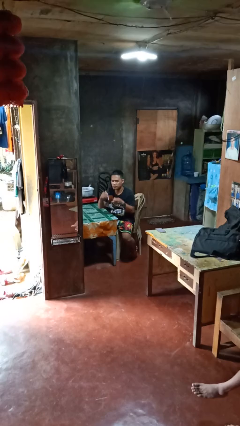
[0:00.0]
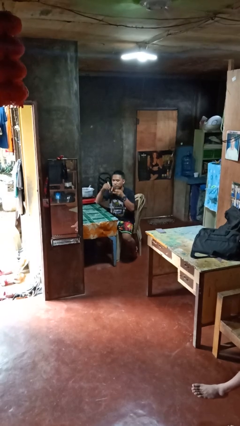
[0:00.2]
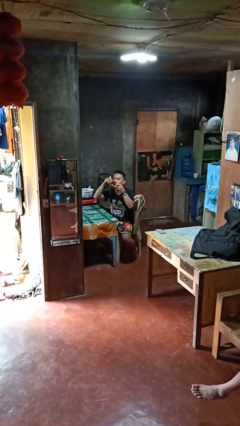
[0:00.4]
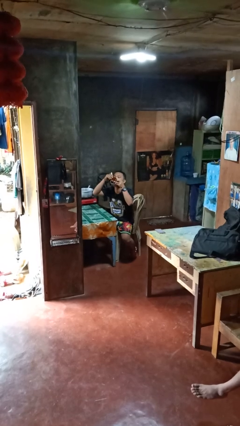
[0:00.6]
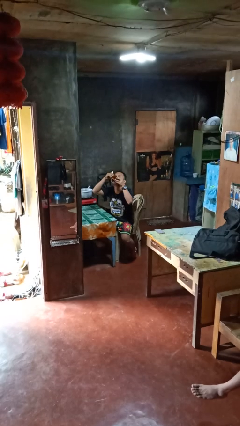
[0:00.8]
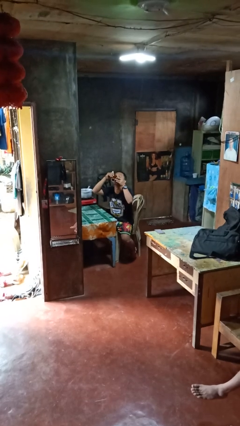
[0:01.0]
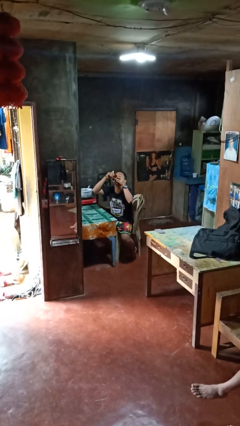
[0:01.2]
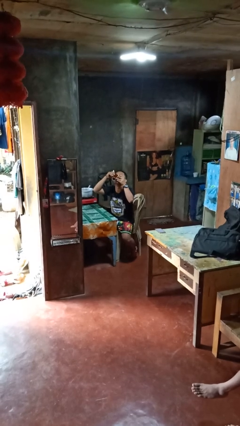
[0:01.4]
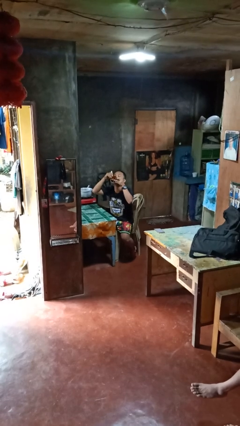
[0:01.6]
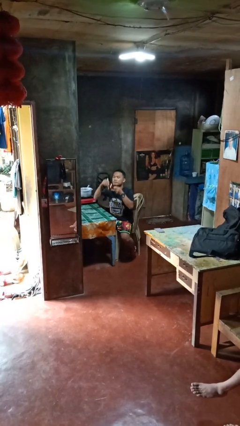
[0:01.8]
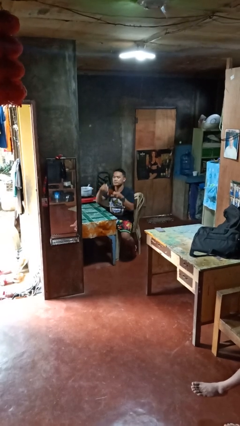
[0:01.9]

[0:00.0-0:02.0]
person drinks from mug

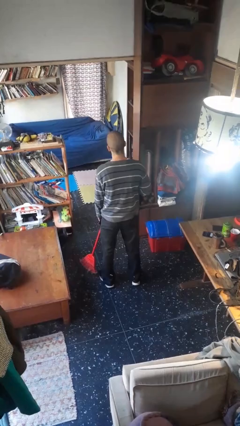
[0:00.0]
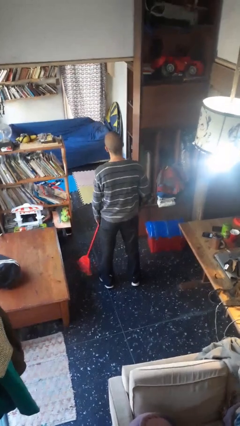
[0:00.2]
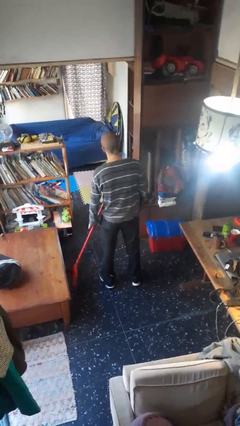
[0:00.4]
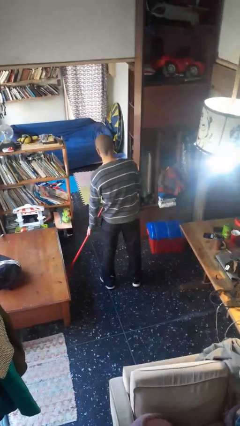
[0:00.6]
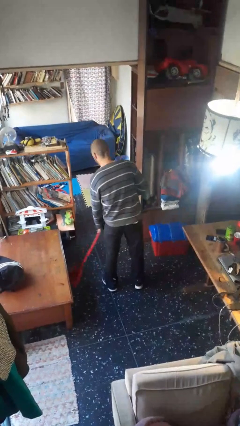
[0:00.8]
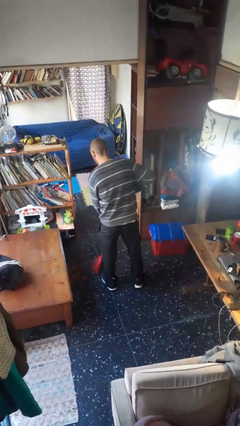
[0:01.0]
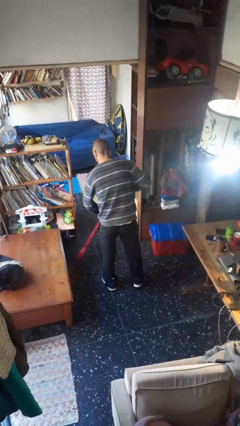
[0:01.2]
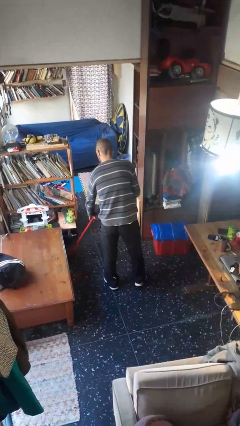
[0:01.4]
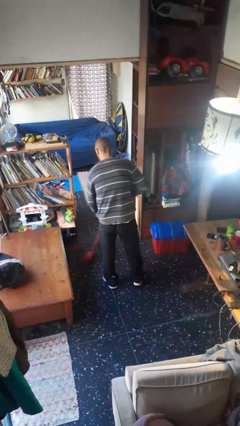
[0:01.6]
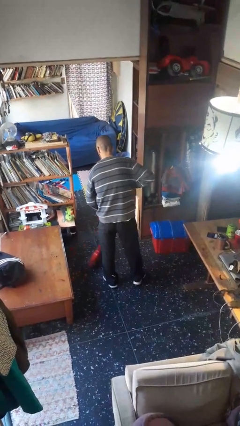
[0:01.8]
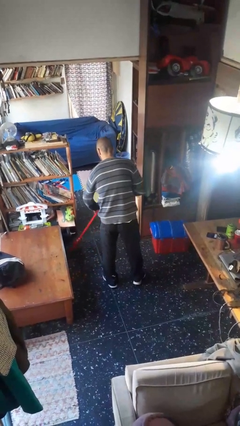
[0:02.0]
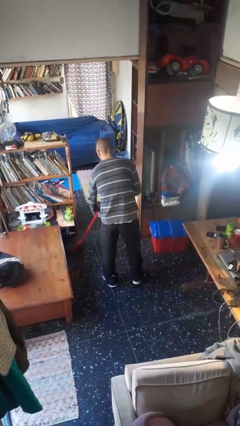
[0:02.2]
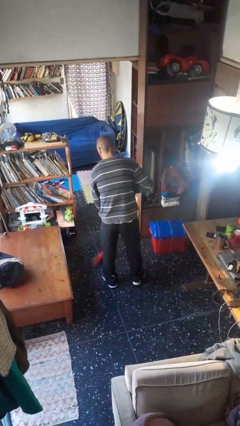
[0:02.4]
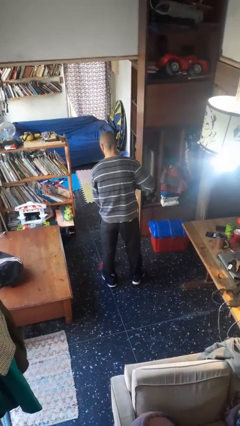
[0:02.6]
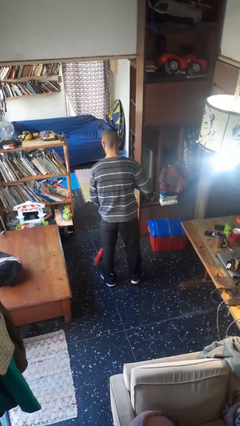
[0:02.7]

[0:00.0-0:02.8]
person sweeps floor

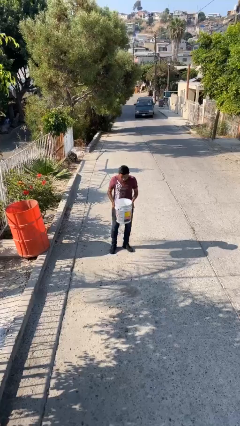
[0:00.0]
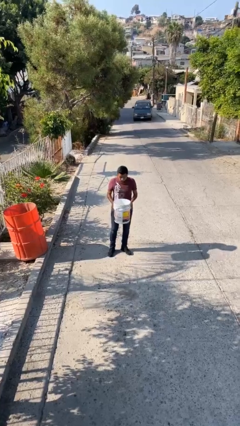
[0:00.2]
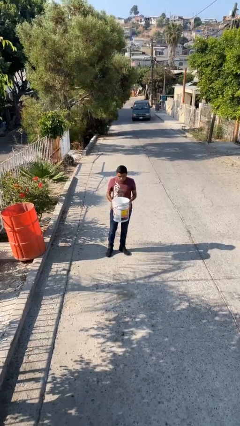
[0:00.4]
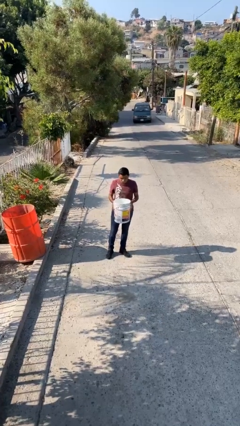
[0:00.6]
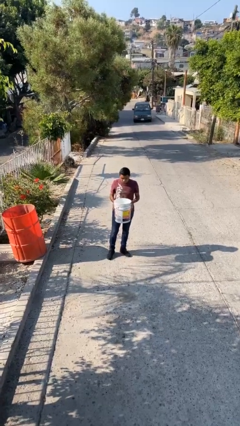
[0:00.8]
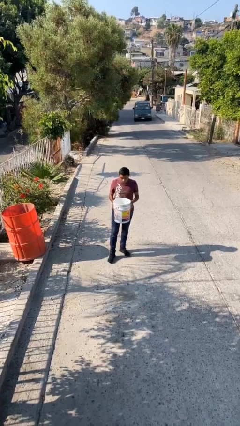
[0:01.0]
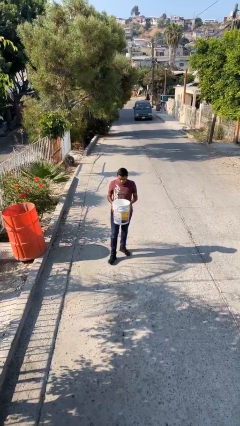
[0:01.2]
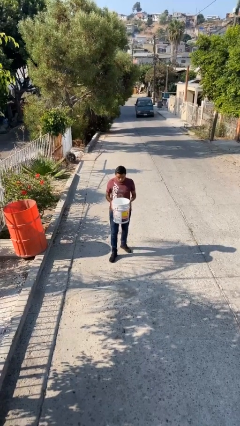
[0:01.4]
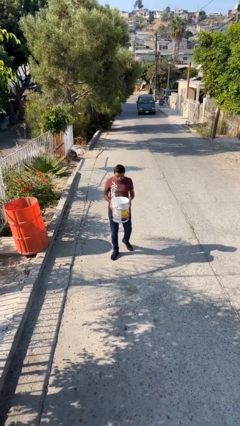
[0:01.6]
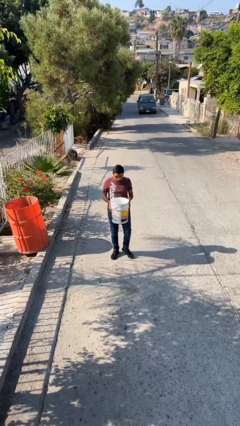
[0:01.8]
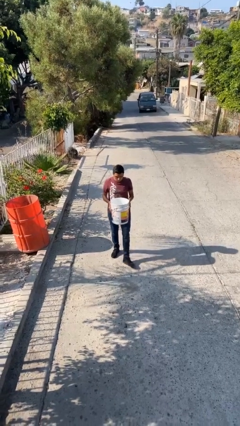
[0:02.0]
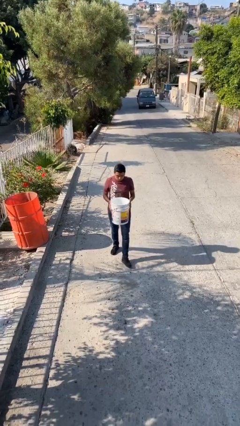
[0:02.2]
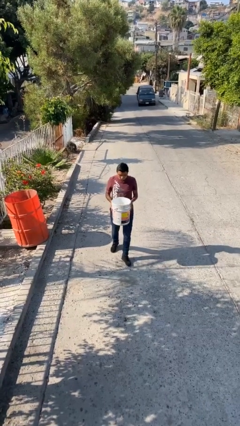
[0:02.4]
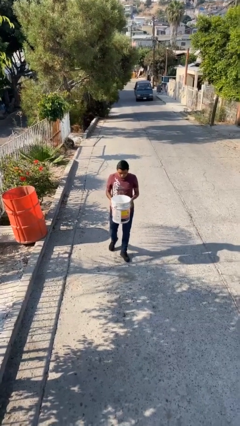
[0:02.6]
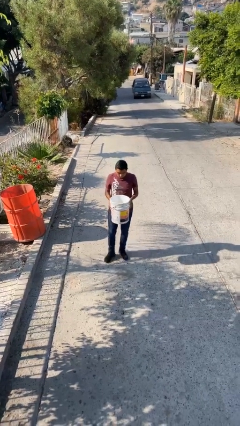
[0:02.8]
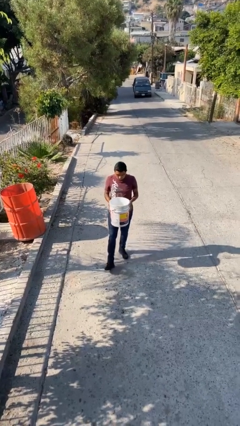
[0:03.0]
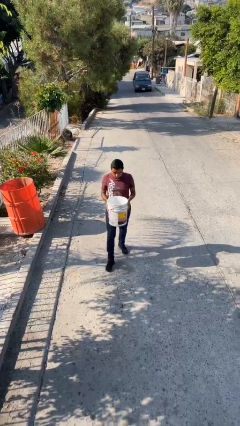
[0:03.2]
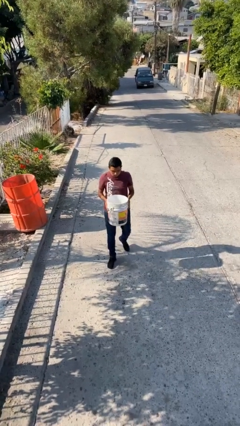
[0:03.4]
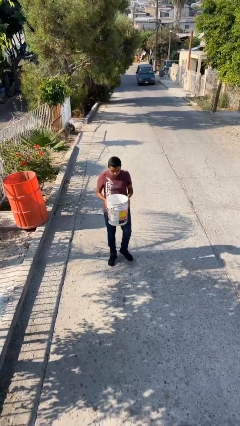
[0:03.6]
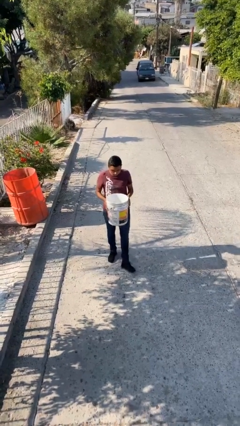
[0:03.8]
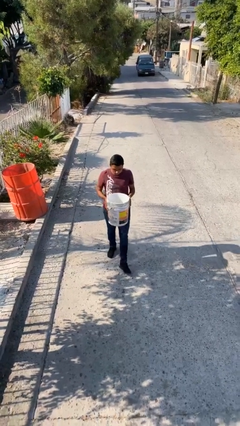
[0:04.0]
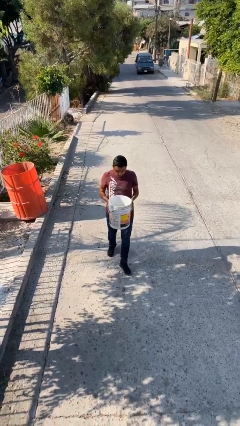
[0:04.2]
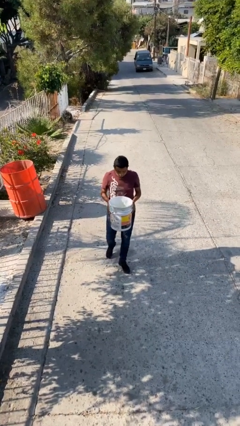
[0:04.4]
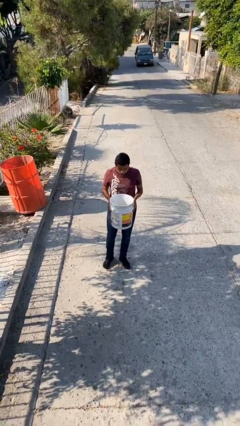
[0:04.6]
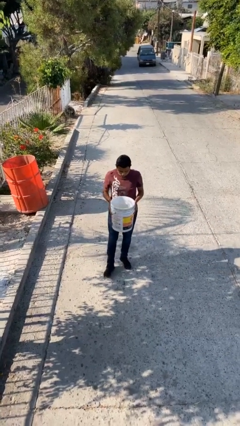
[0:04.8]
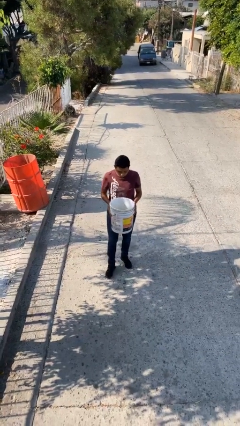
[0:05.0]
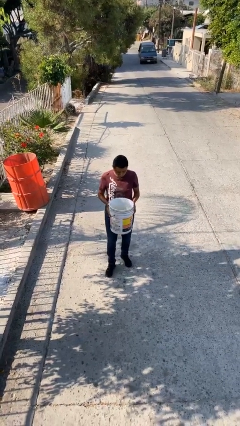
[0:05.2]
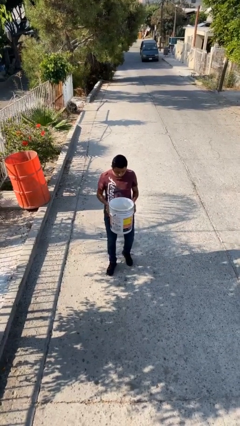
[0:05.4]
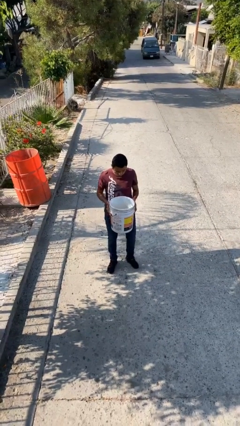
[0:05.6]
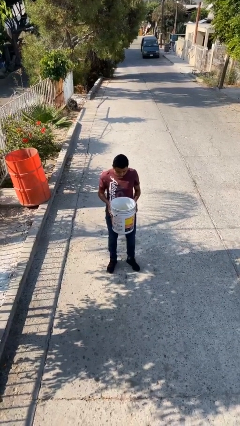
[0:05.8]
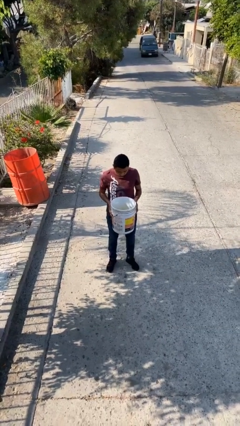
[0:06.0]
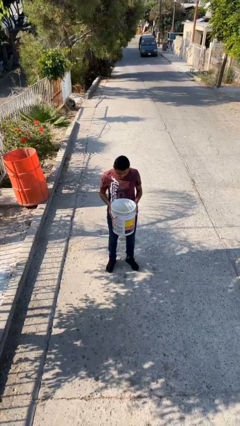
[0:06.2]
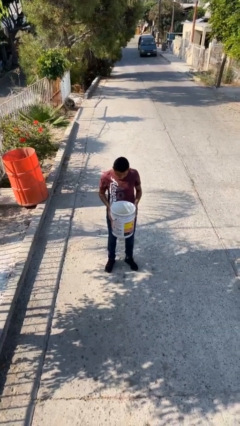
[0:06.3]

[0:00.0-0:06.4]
person carries heavy object

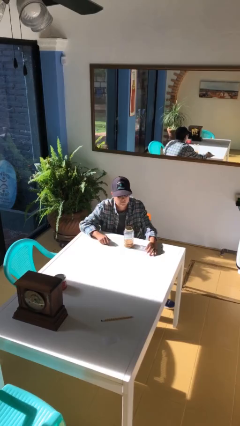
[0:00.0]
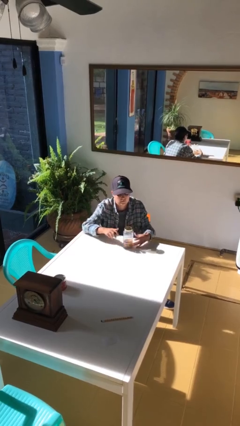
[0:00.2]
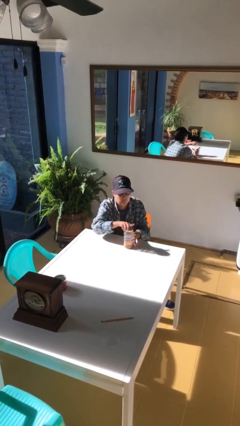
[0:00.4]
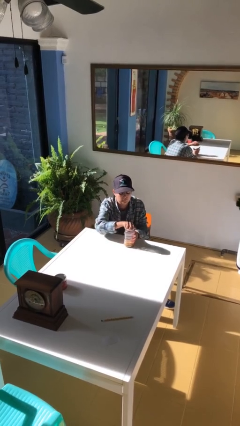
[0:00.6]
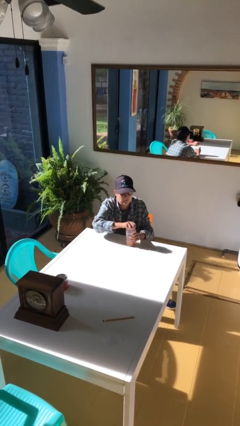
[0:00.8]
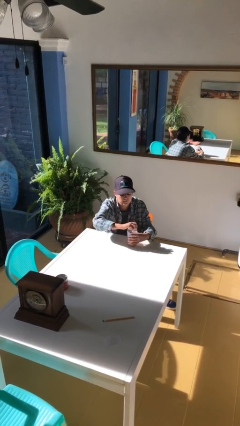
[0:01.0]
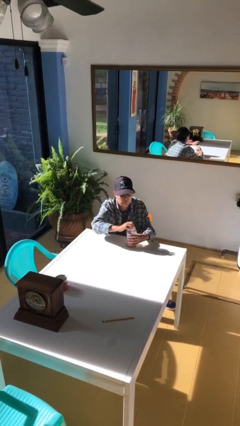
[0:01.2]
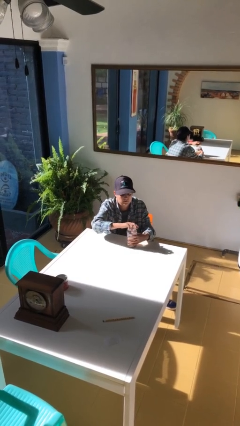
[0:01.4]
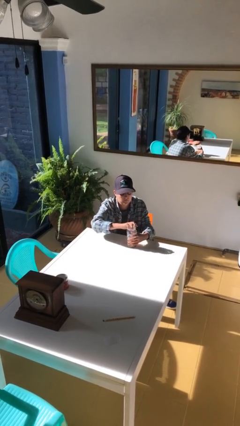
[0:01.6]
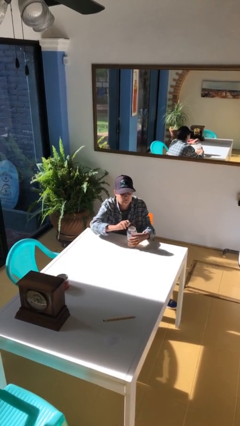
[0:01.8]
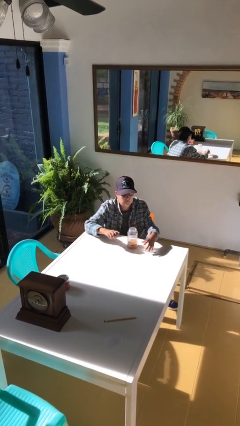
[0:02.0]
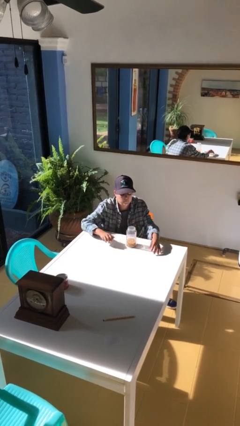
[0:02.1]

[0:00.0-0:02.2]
person opens jar

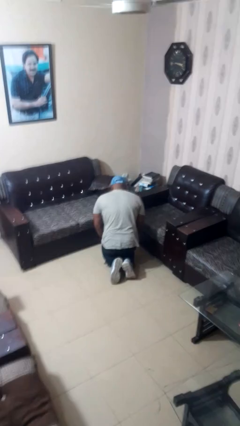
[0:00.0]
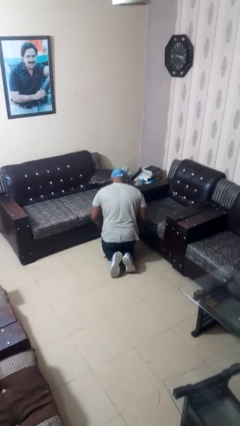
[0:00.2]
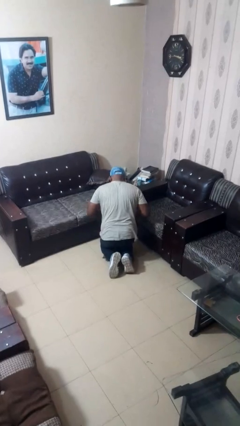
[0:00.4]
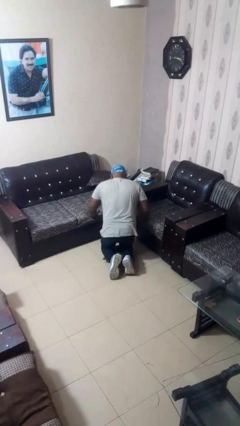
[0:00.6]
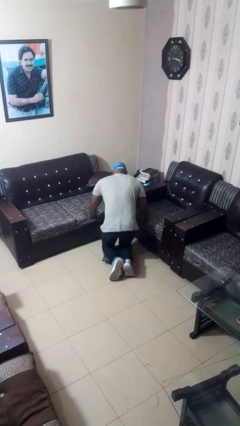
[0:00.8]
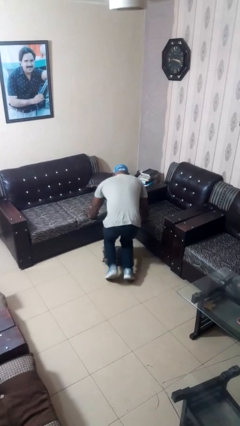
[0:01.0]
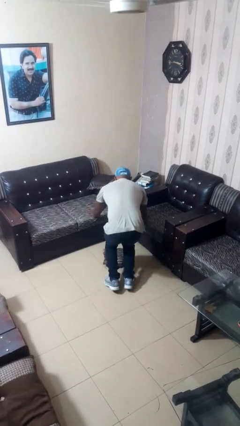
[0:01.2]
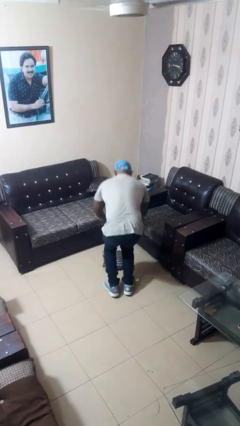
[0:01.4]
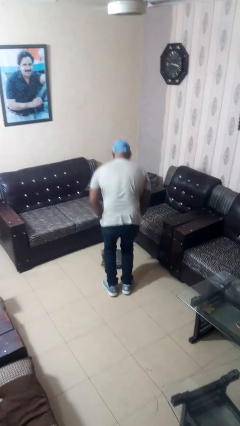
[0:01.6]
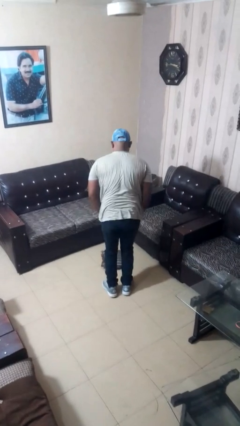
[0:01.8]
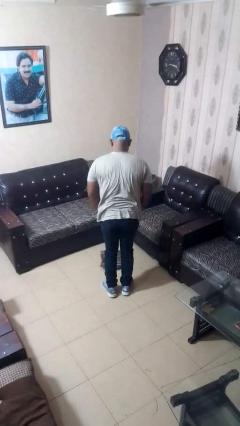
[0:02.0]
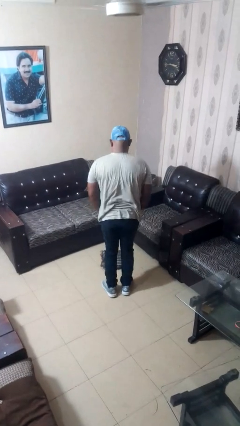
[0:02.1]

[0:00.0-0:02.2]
person stands up from floor

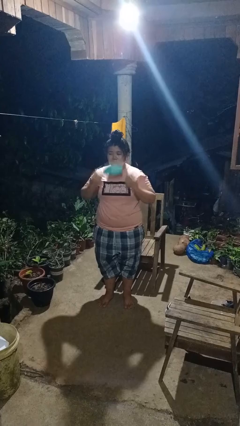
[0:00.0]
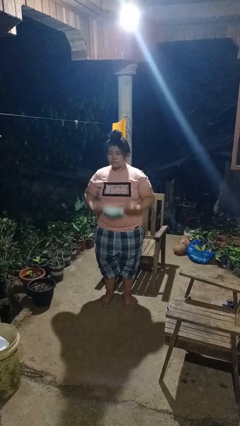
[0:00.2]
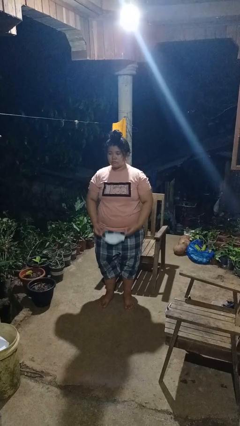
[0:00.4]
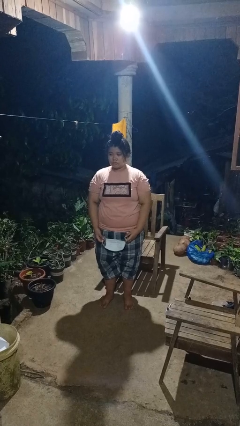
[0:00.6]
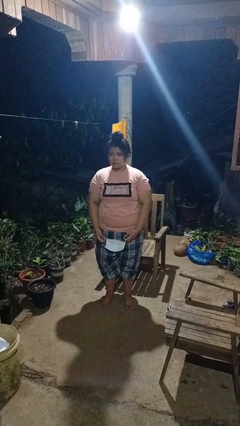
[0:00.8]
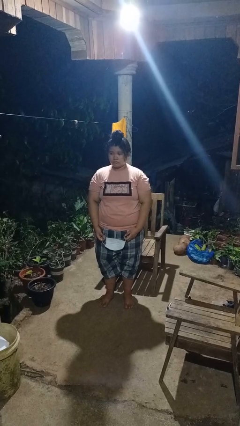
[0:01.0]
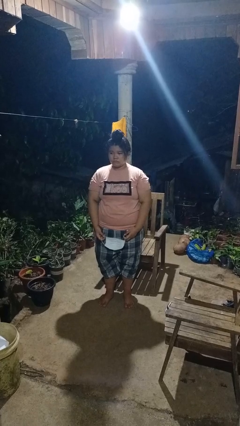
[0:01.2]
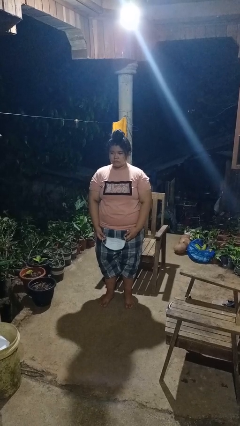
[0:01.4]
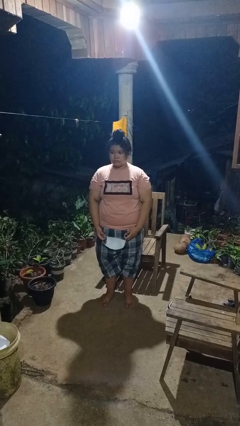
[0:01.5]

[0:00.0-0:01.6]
person takes off facemask

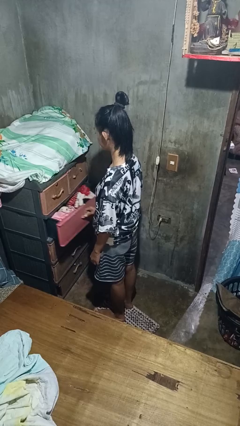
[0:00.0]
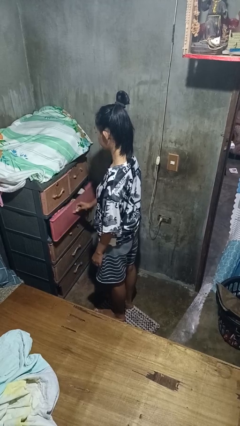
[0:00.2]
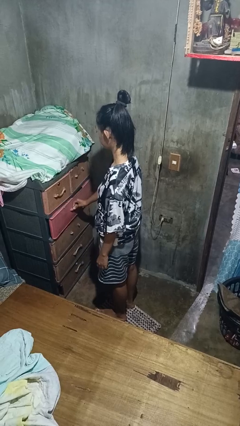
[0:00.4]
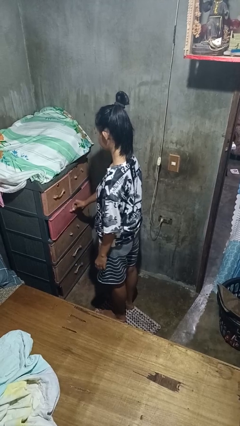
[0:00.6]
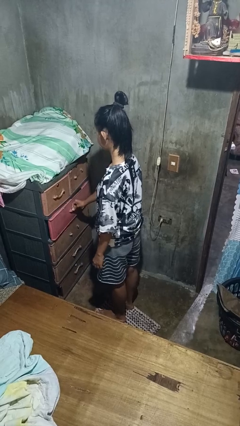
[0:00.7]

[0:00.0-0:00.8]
person closes dresser drawer
